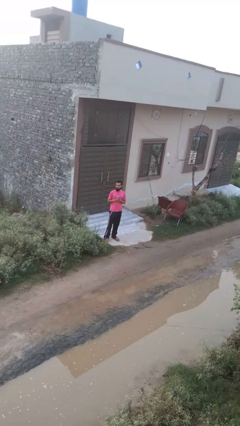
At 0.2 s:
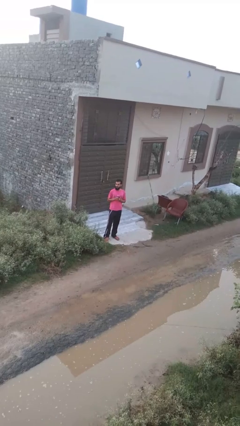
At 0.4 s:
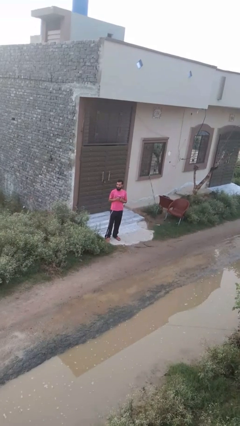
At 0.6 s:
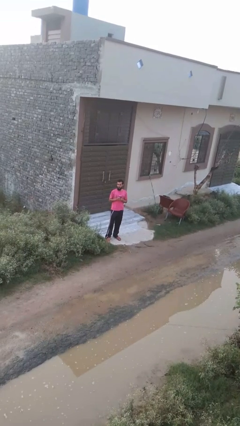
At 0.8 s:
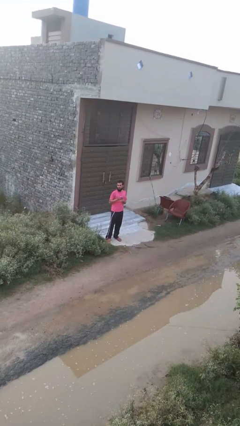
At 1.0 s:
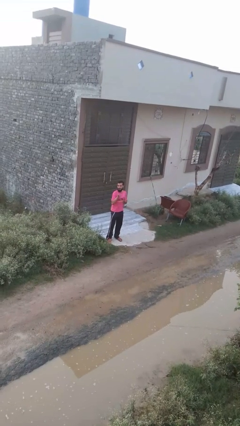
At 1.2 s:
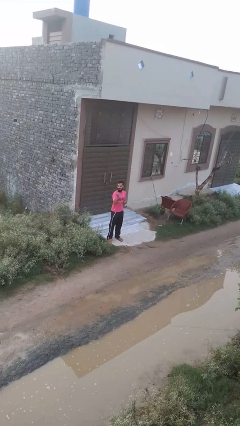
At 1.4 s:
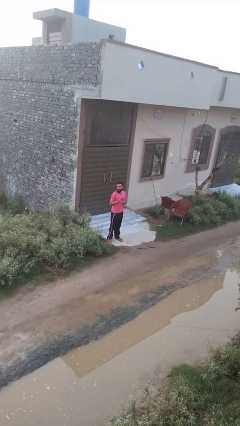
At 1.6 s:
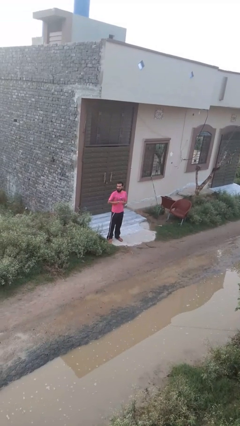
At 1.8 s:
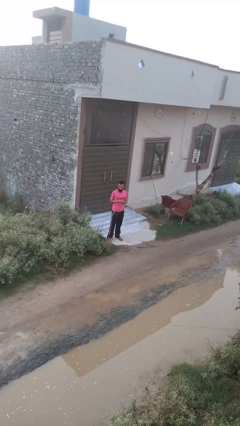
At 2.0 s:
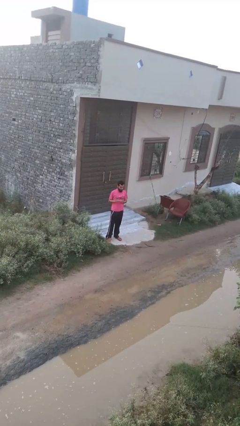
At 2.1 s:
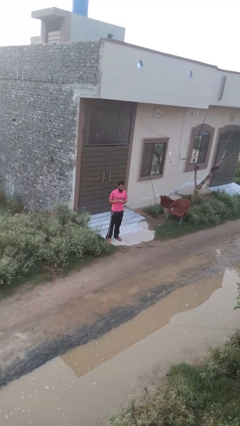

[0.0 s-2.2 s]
person punches

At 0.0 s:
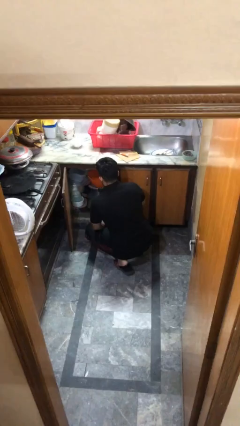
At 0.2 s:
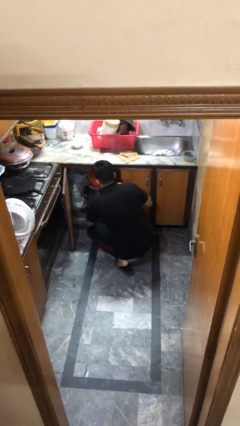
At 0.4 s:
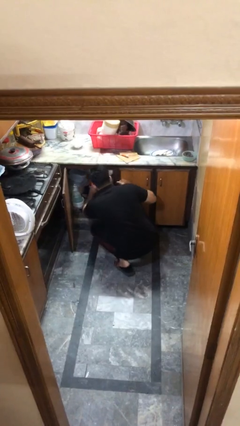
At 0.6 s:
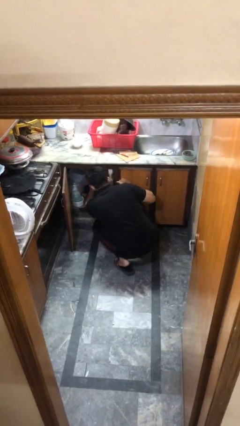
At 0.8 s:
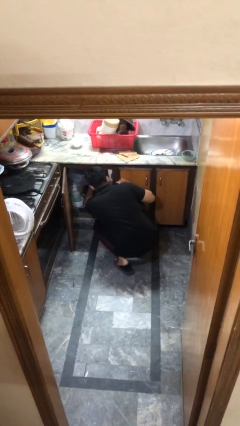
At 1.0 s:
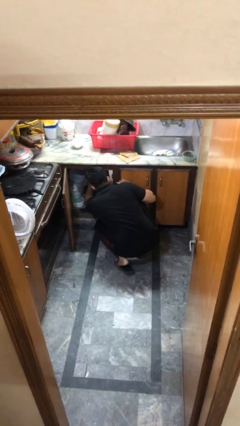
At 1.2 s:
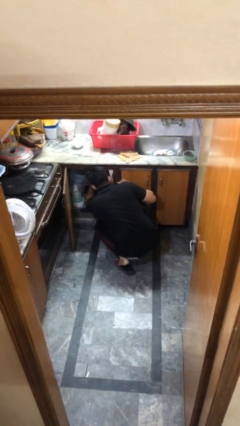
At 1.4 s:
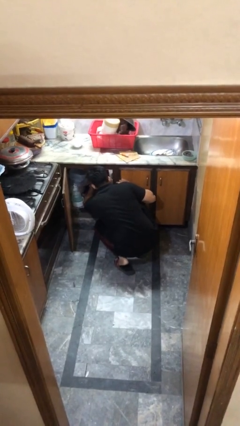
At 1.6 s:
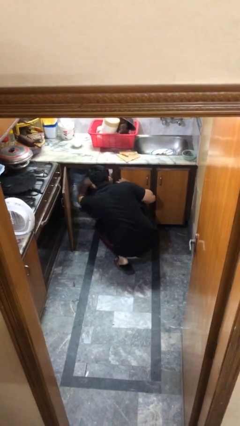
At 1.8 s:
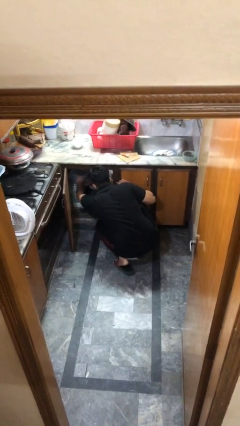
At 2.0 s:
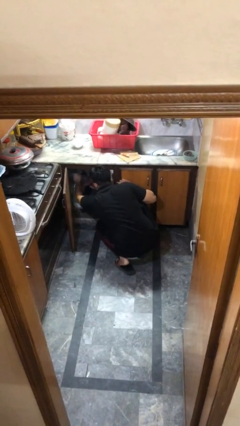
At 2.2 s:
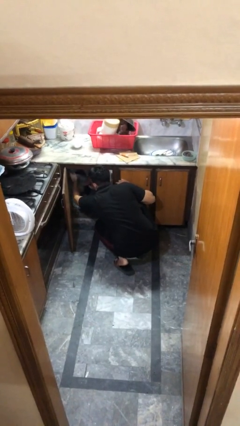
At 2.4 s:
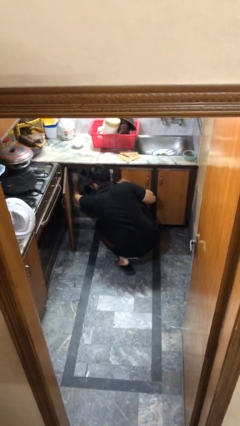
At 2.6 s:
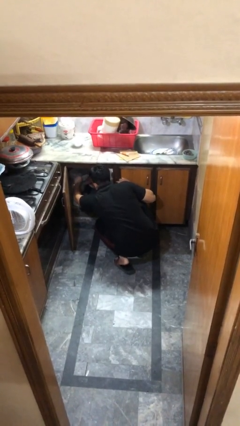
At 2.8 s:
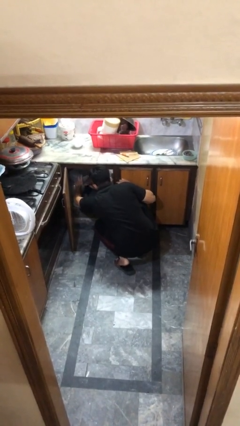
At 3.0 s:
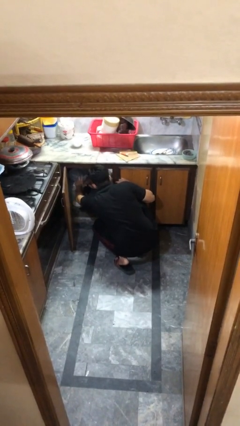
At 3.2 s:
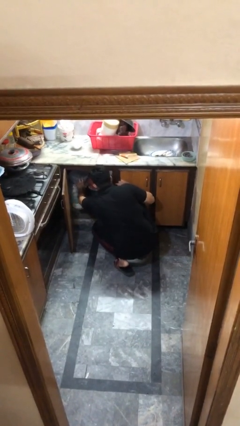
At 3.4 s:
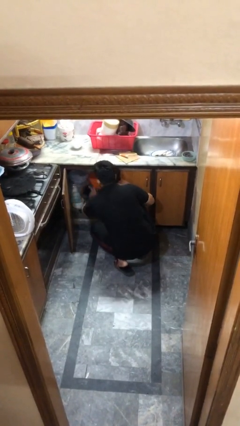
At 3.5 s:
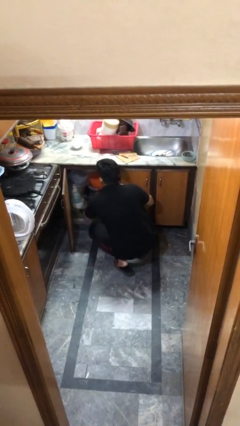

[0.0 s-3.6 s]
person searches in kitchen drawer

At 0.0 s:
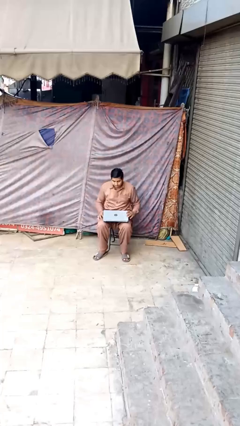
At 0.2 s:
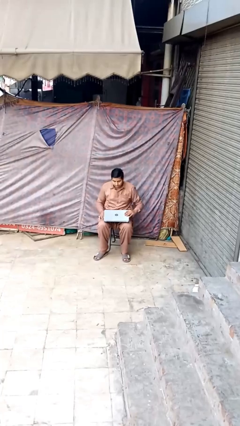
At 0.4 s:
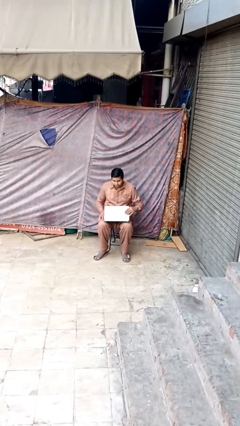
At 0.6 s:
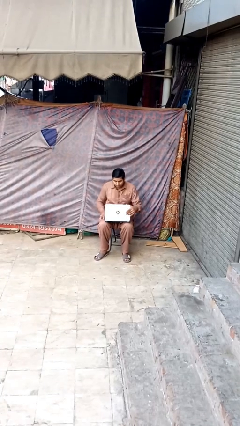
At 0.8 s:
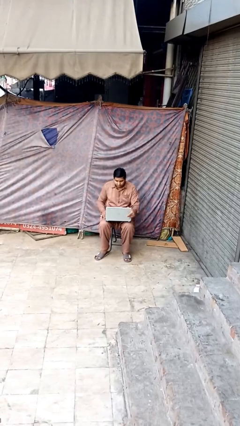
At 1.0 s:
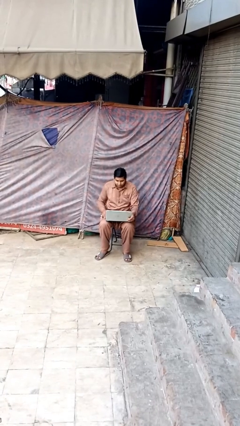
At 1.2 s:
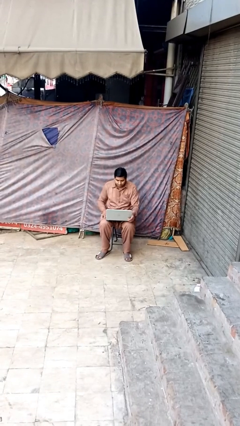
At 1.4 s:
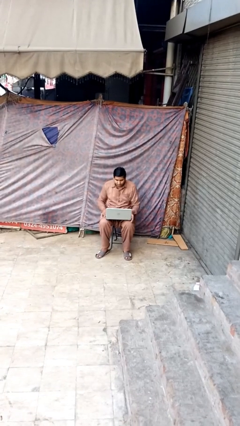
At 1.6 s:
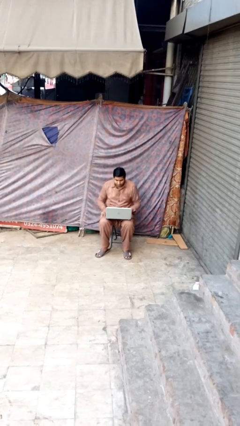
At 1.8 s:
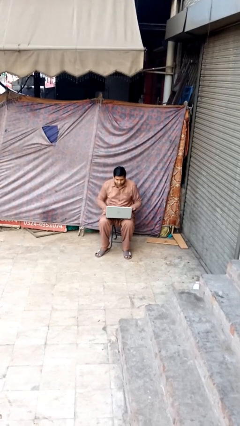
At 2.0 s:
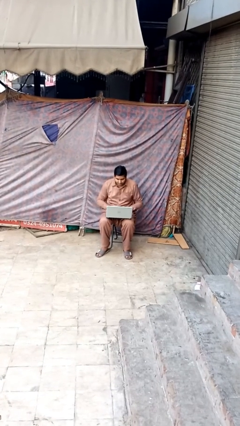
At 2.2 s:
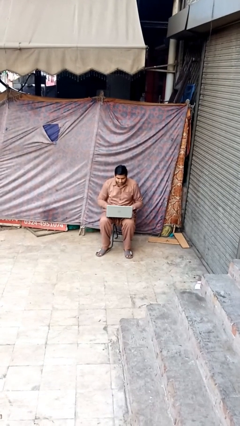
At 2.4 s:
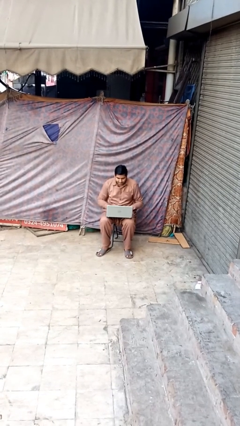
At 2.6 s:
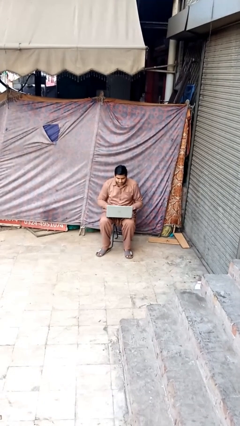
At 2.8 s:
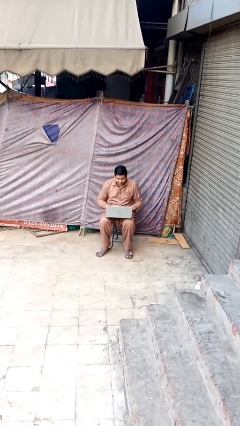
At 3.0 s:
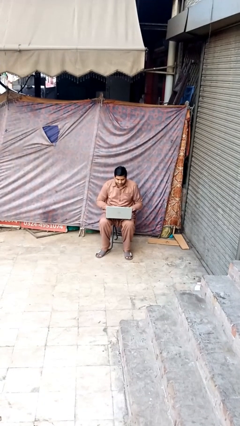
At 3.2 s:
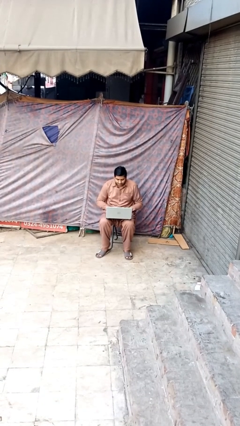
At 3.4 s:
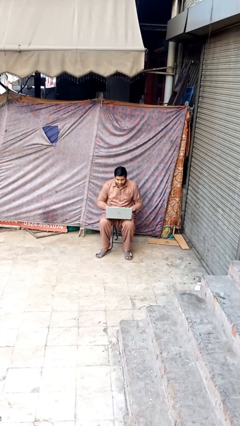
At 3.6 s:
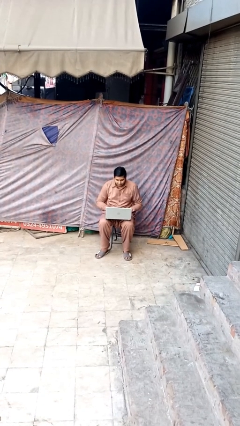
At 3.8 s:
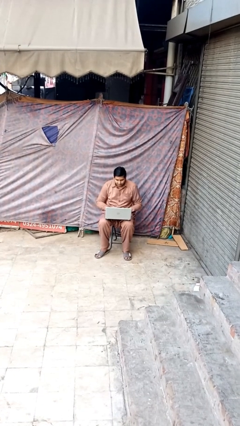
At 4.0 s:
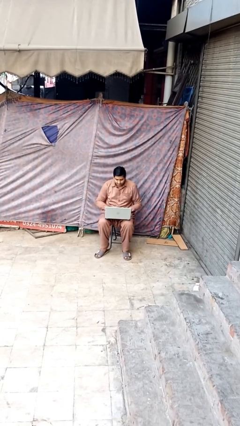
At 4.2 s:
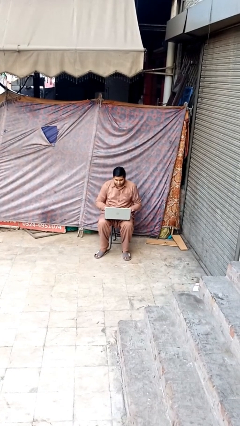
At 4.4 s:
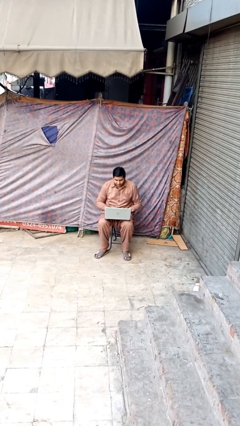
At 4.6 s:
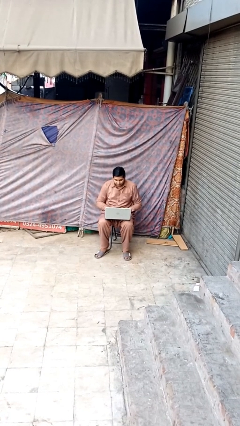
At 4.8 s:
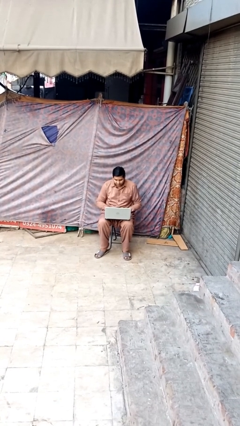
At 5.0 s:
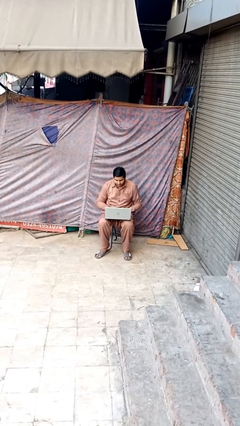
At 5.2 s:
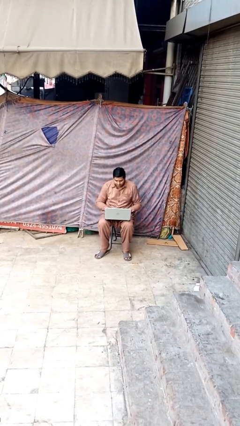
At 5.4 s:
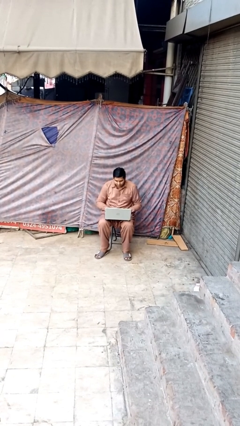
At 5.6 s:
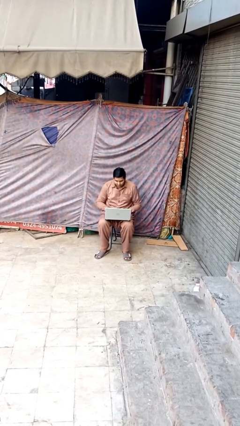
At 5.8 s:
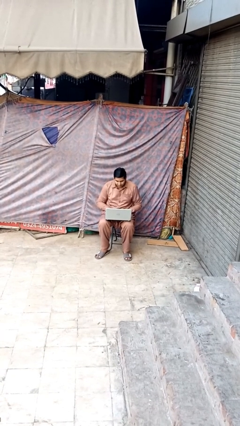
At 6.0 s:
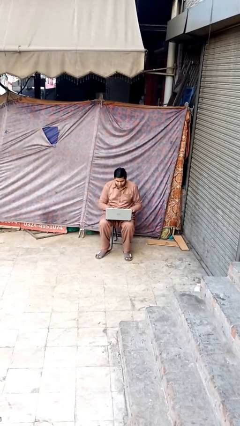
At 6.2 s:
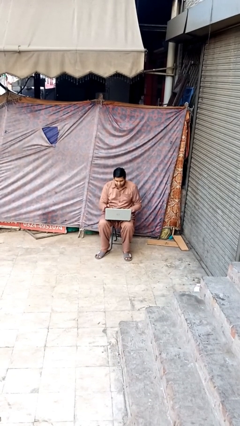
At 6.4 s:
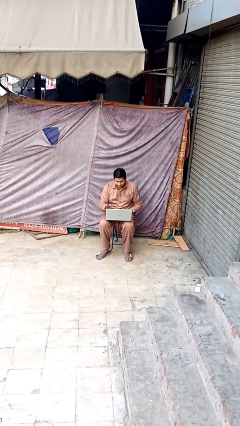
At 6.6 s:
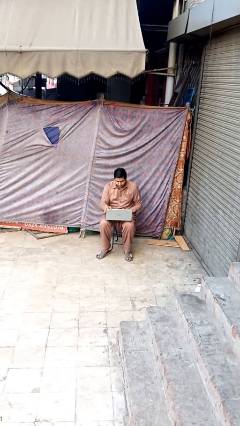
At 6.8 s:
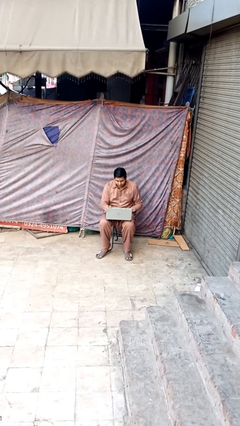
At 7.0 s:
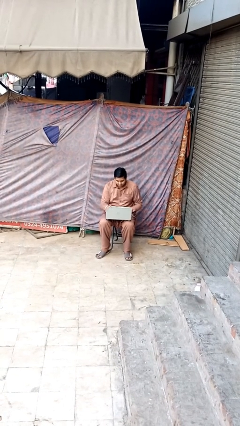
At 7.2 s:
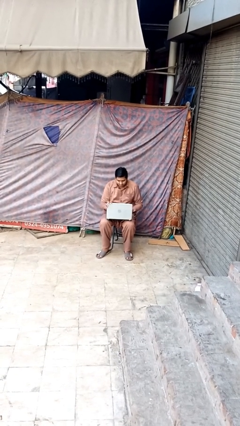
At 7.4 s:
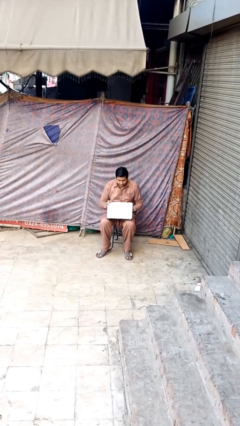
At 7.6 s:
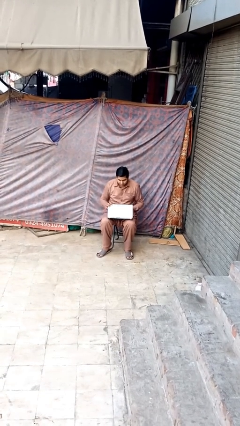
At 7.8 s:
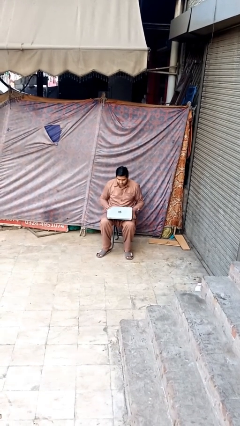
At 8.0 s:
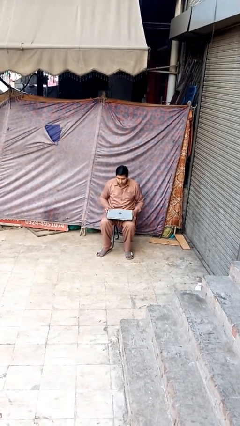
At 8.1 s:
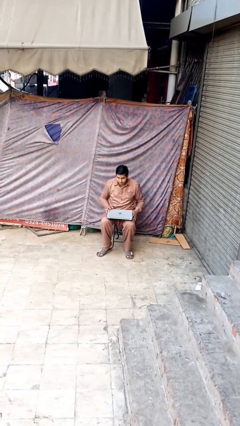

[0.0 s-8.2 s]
person interacts with laptop

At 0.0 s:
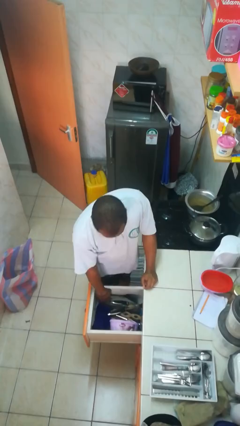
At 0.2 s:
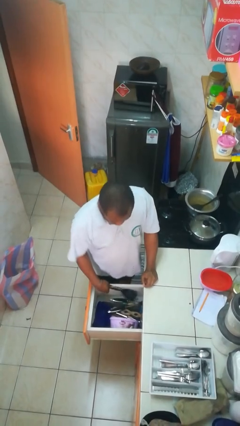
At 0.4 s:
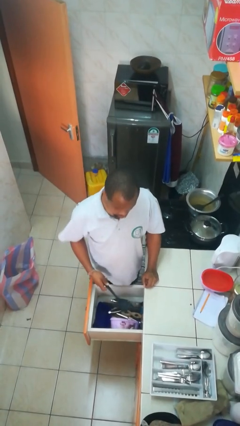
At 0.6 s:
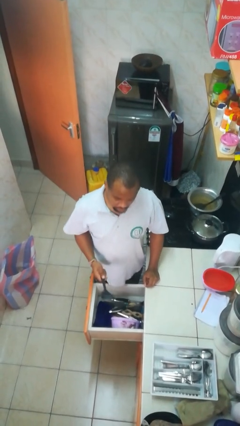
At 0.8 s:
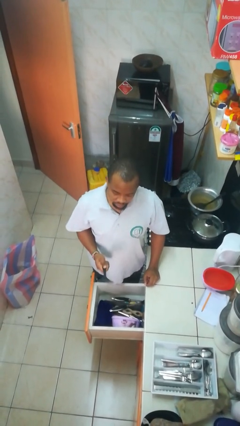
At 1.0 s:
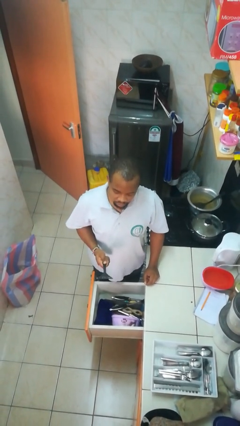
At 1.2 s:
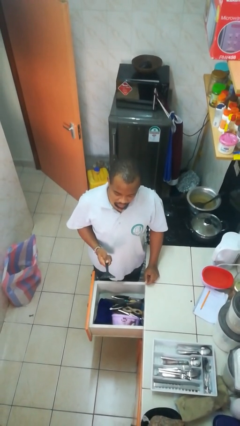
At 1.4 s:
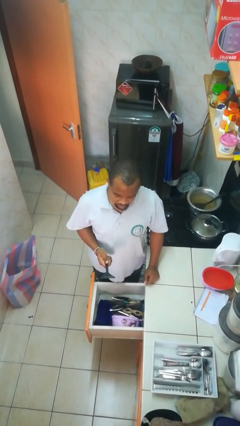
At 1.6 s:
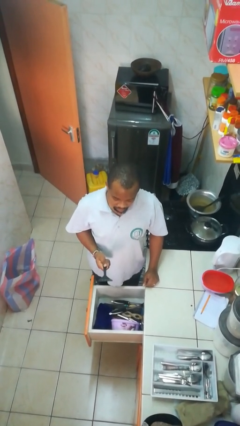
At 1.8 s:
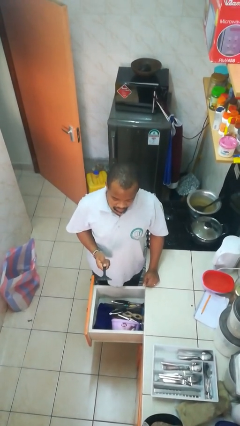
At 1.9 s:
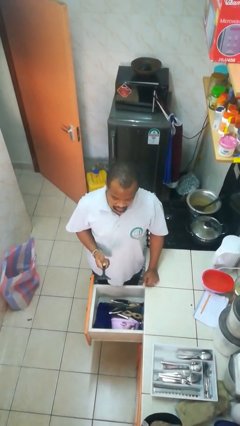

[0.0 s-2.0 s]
person takes object from kitchen drawer

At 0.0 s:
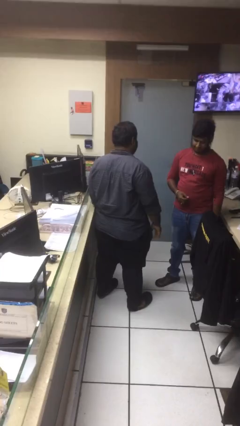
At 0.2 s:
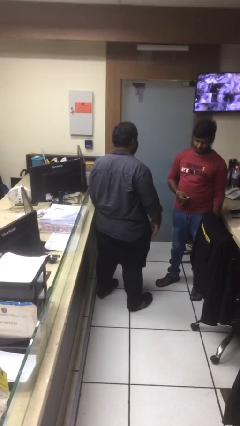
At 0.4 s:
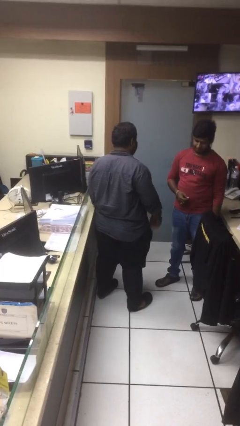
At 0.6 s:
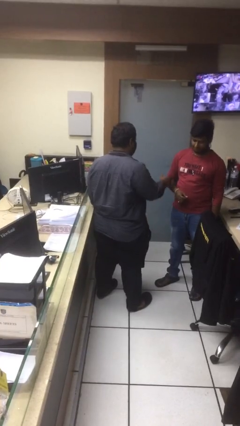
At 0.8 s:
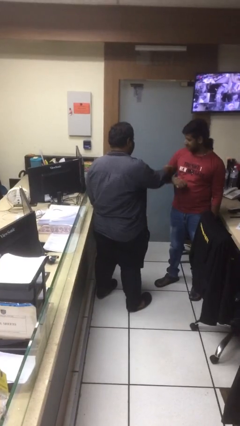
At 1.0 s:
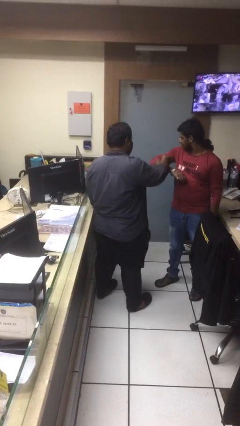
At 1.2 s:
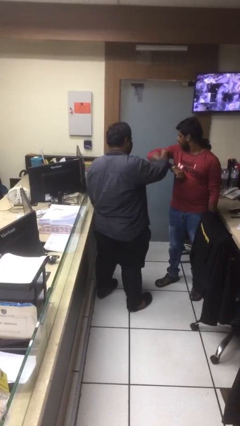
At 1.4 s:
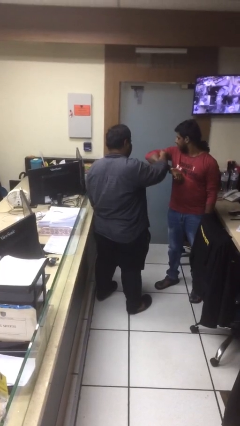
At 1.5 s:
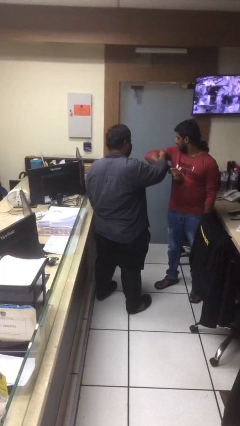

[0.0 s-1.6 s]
person grabs person by bicep

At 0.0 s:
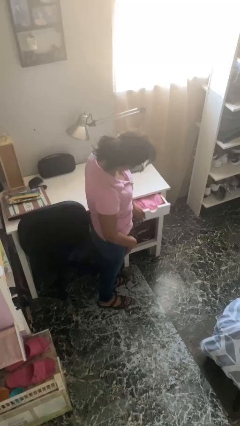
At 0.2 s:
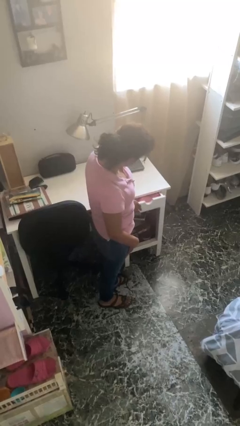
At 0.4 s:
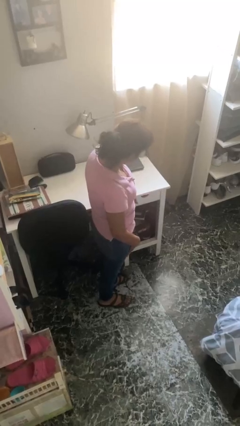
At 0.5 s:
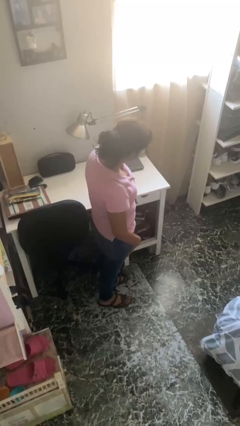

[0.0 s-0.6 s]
person closes dresser drawer
